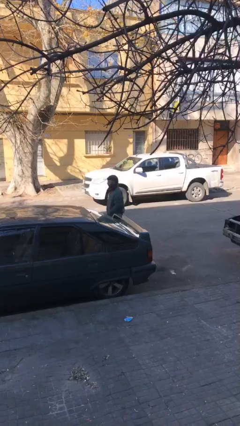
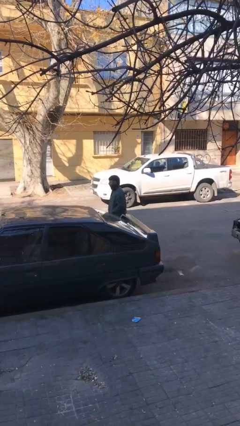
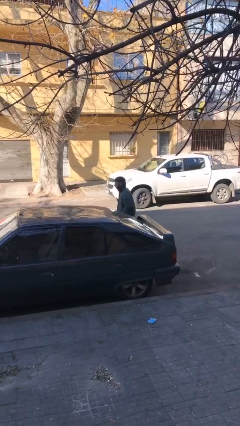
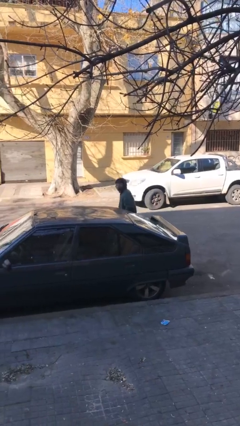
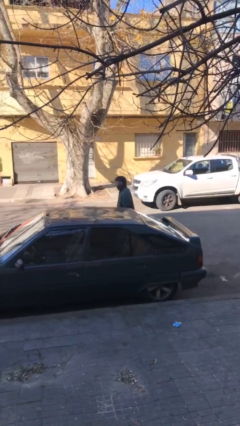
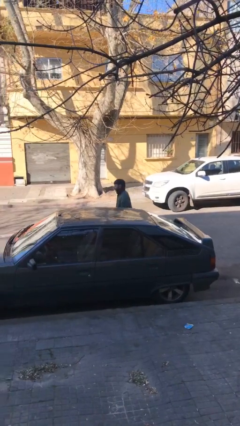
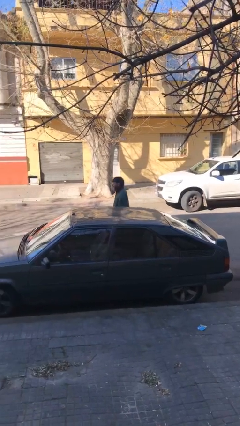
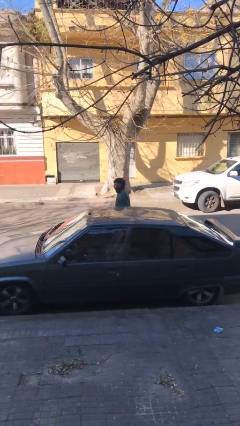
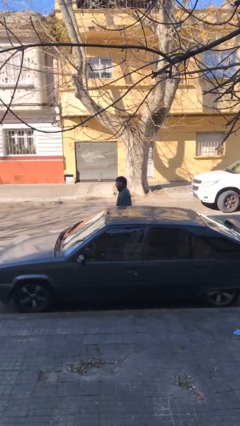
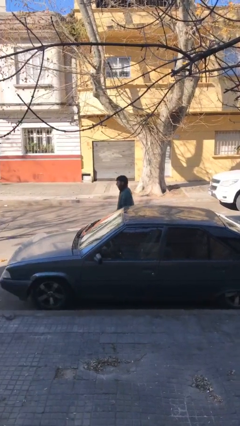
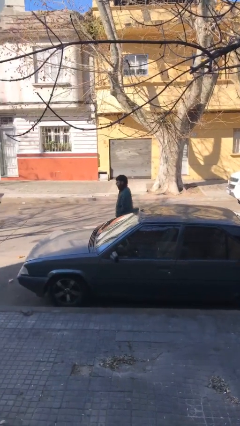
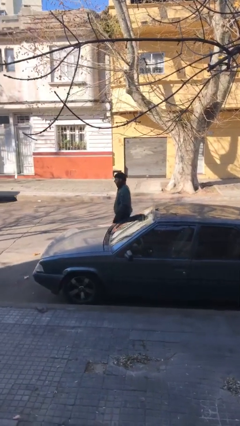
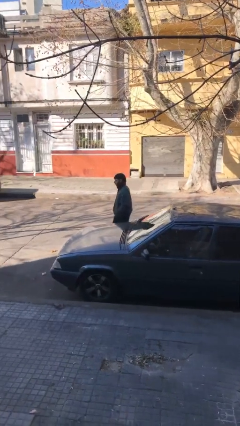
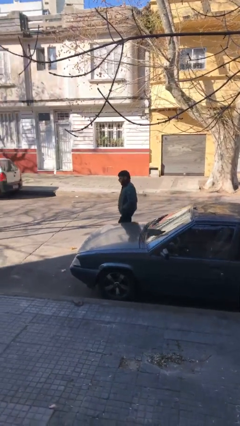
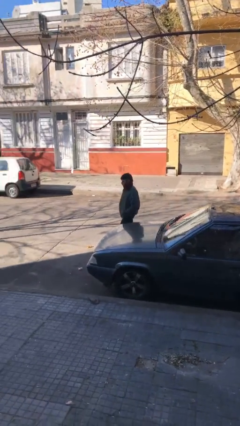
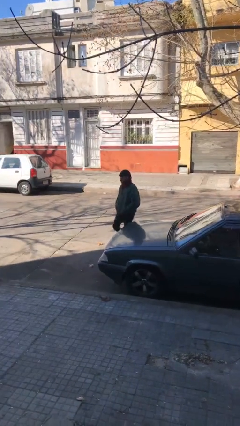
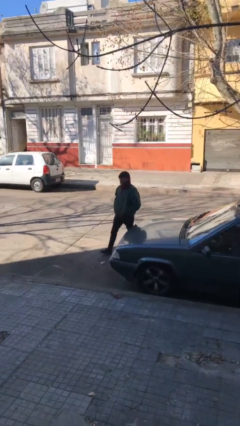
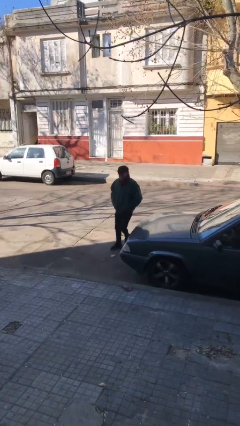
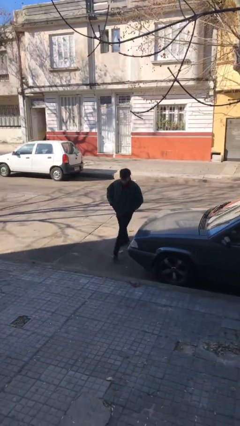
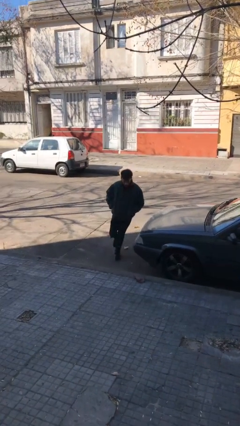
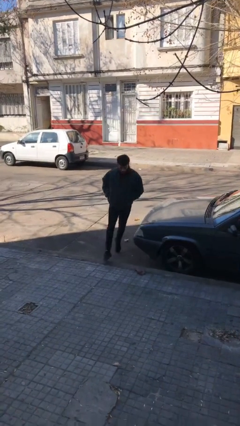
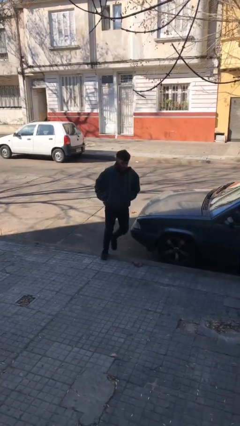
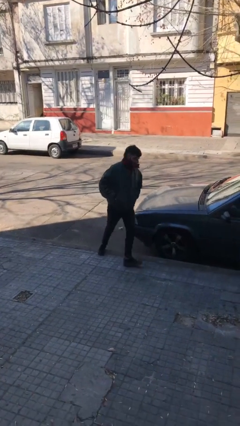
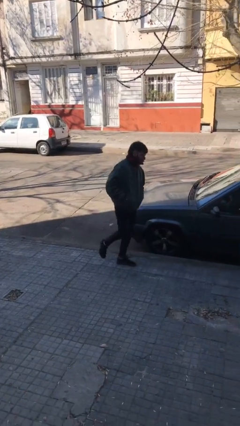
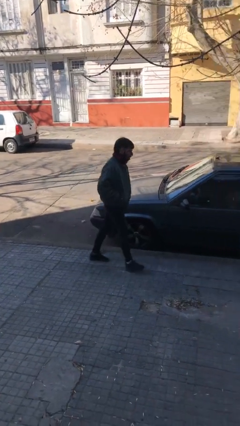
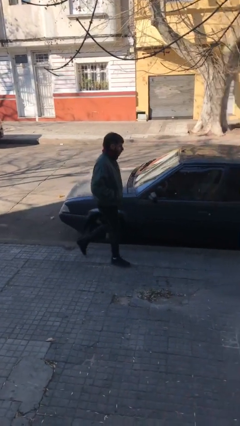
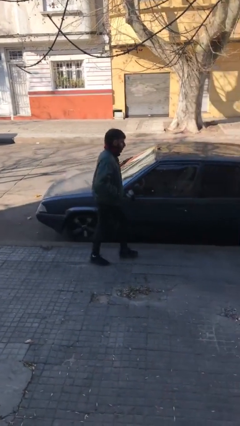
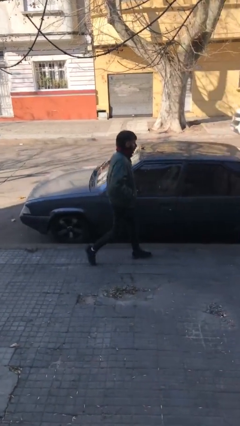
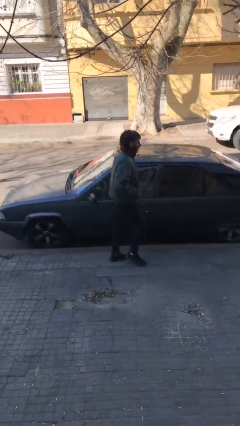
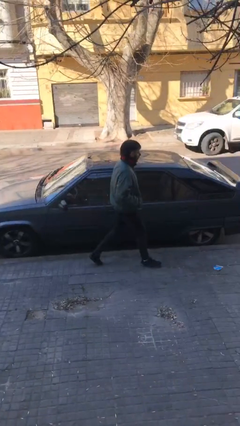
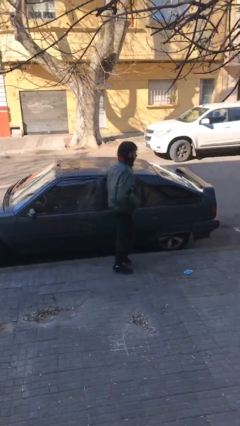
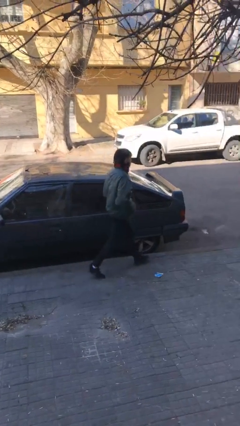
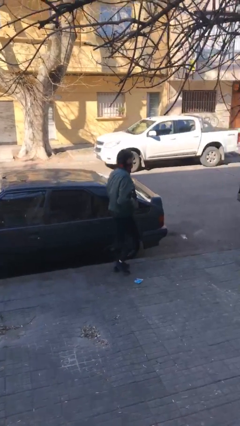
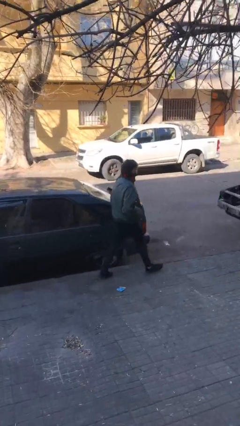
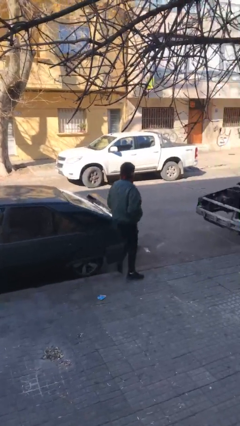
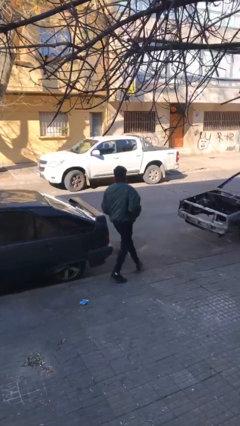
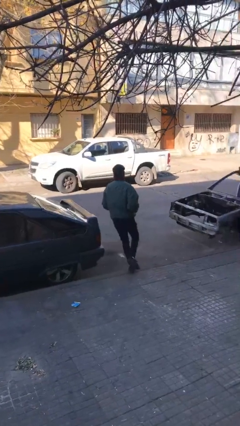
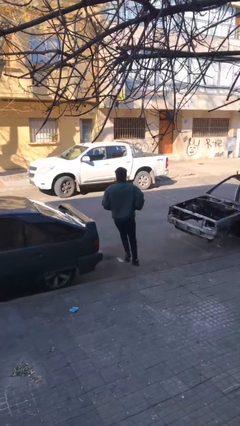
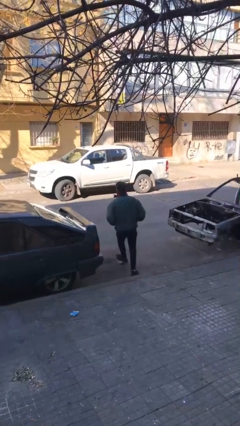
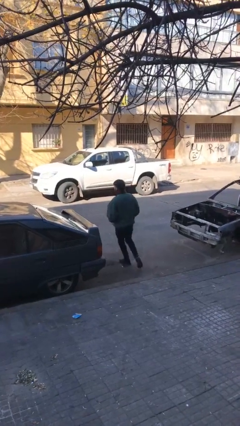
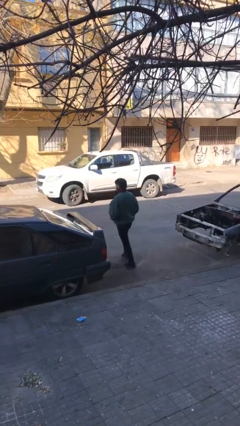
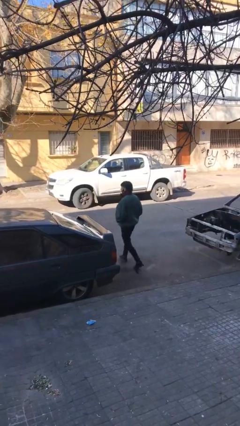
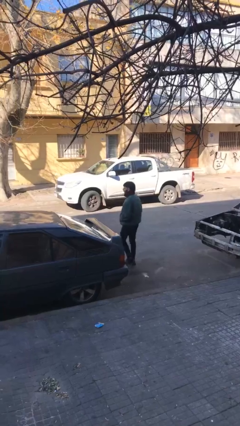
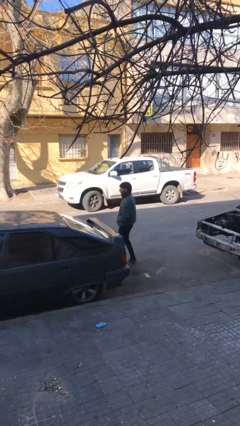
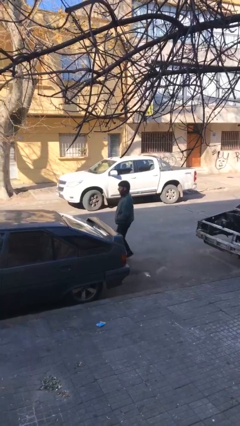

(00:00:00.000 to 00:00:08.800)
person walks around car

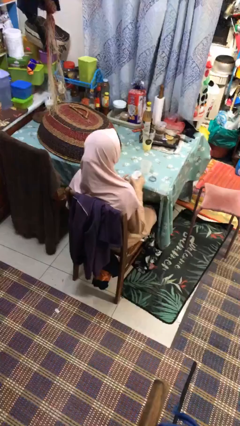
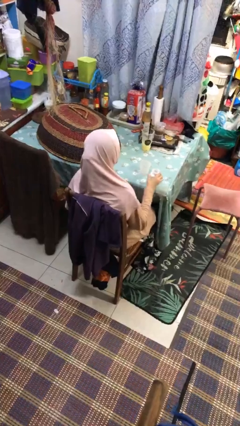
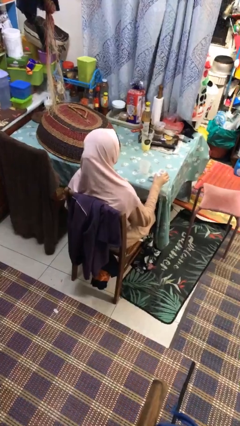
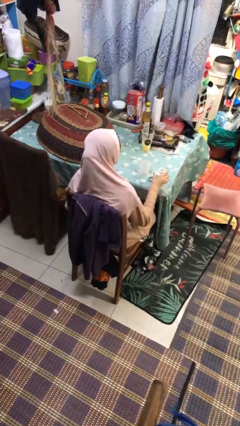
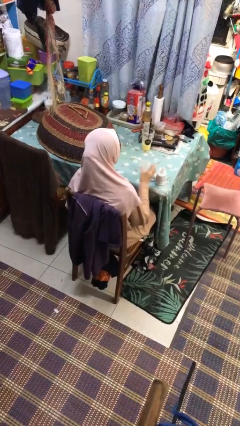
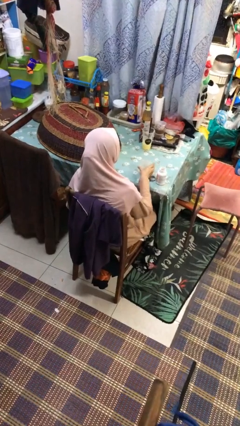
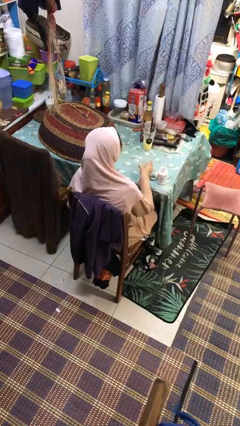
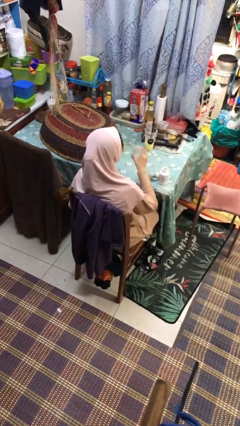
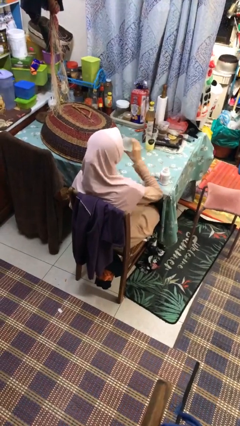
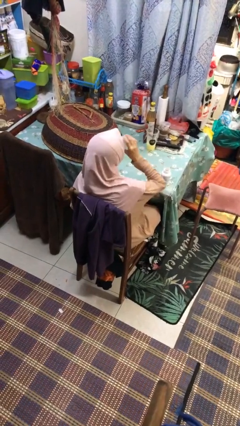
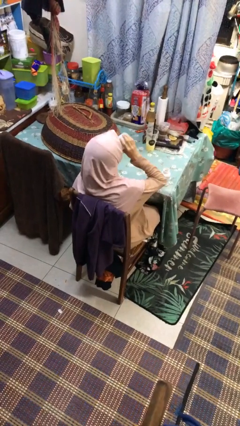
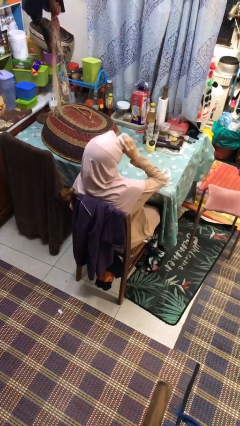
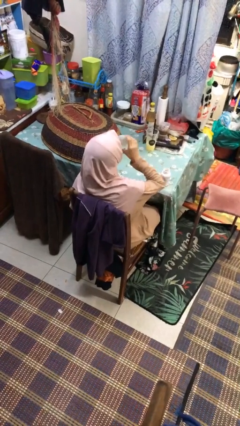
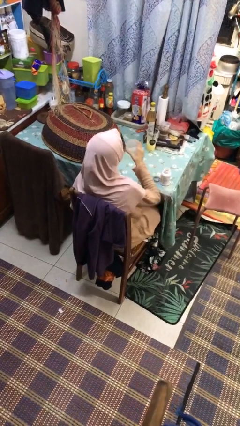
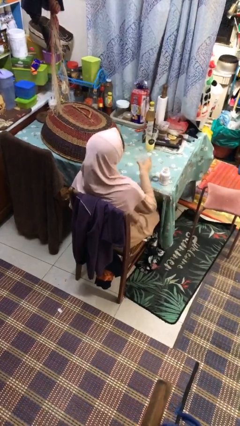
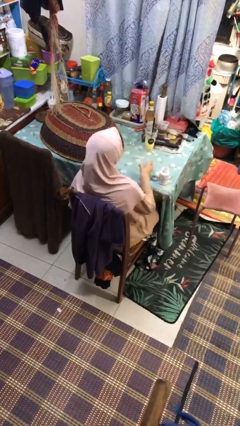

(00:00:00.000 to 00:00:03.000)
person drinks from cup

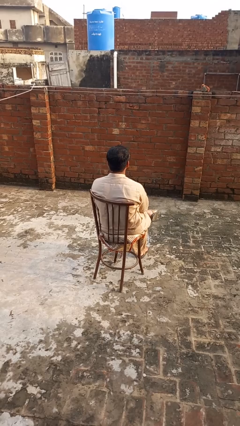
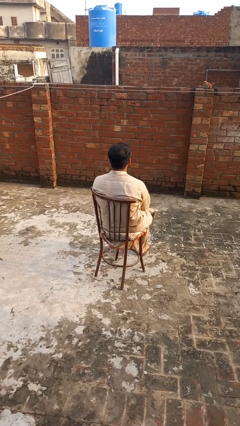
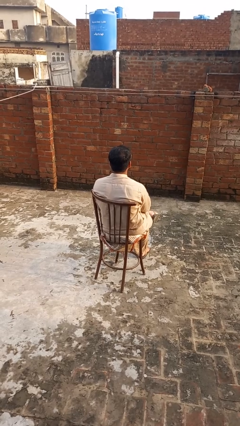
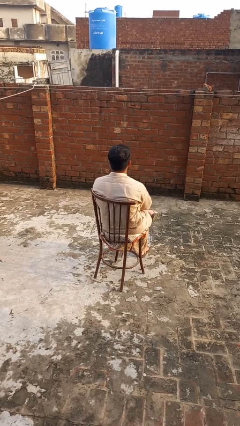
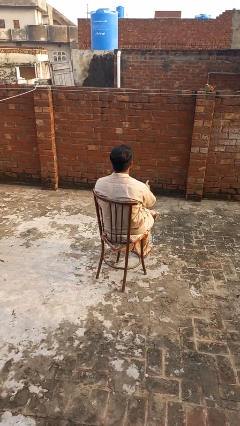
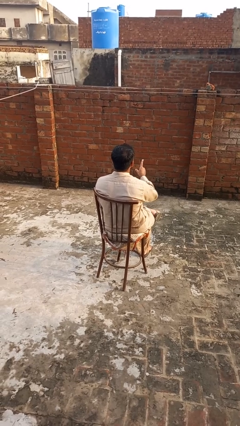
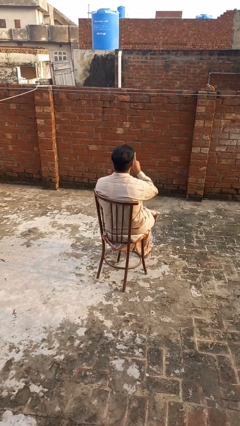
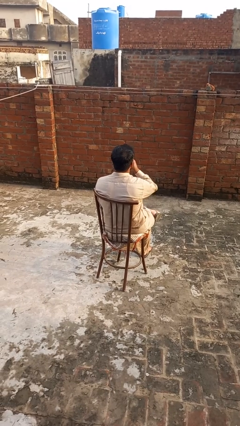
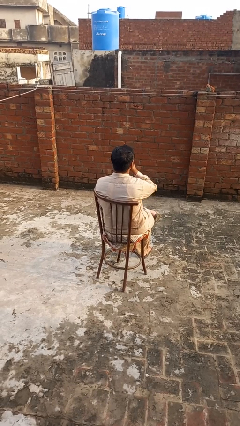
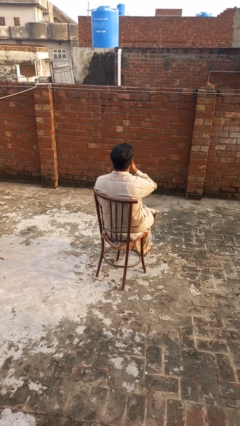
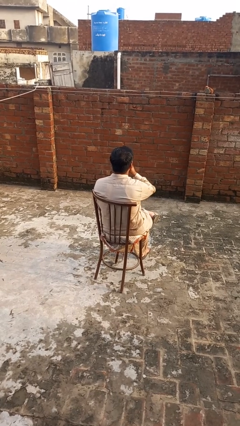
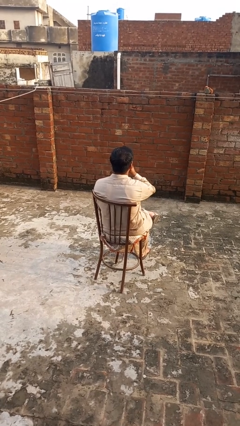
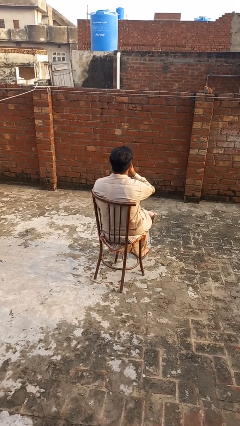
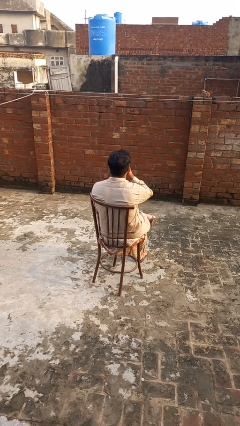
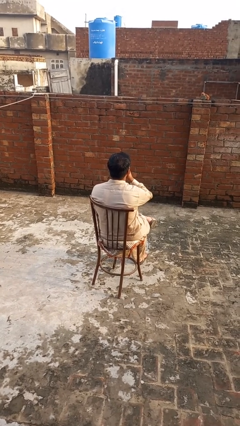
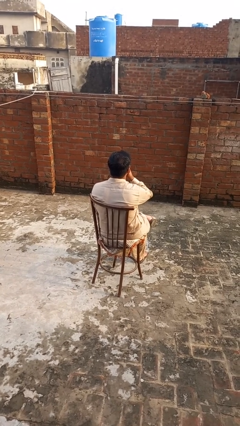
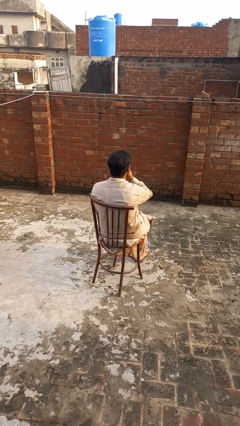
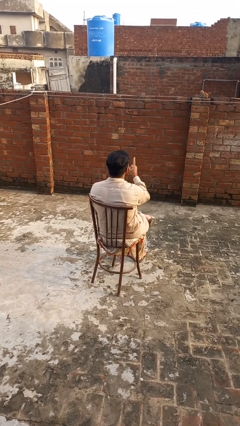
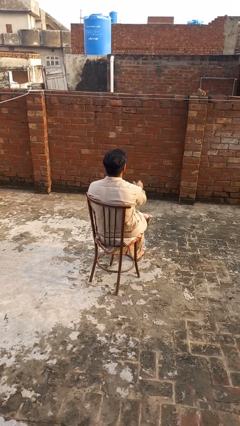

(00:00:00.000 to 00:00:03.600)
person gestures be quiet

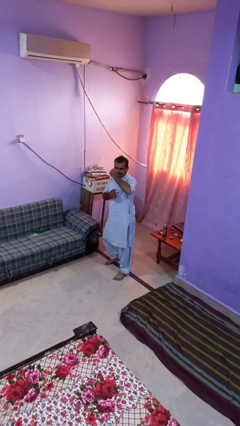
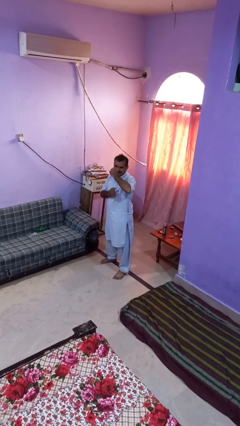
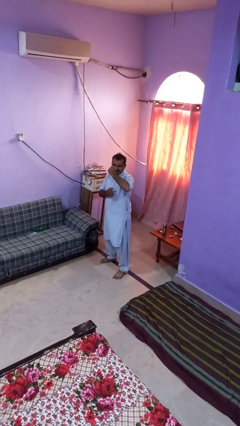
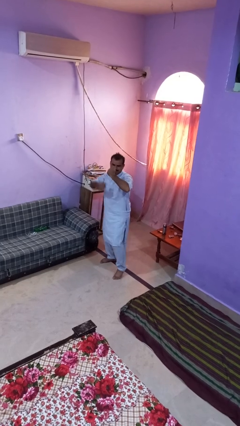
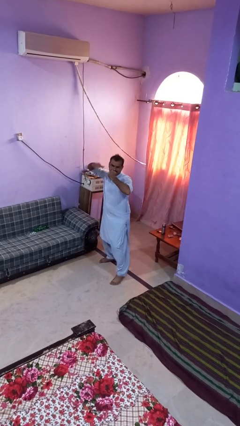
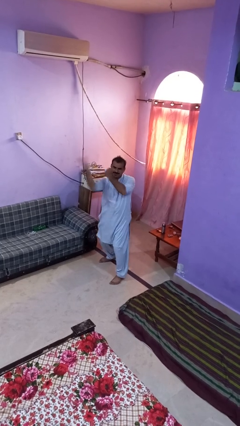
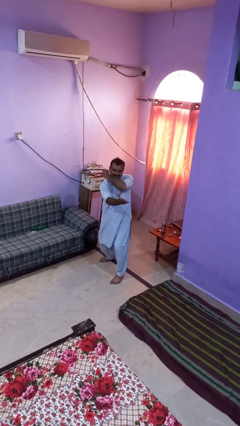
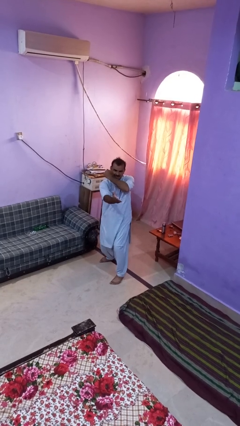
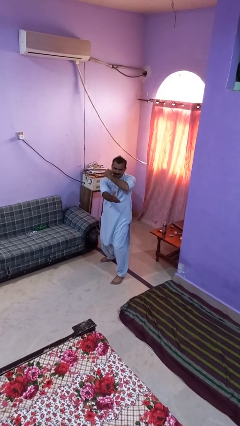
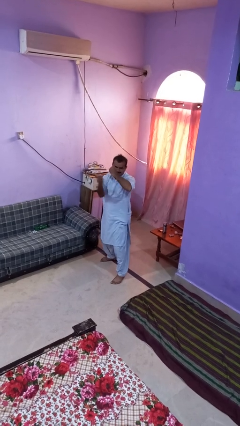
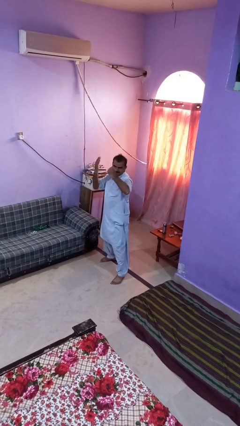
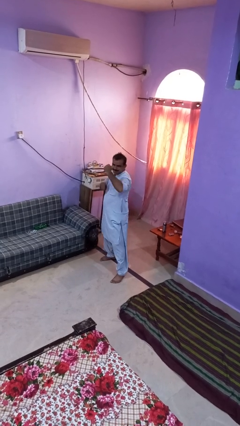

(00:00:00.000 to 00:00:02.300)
person karate chop

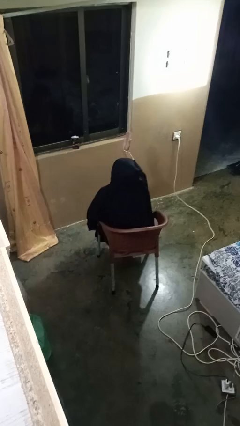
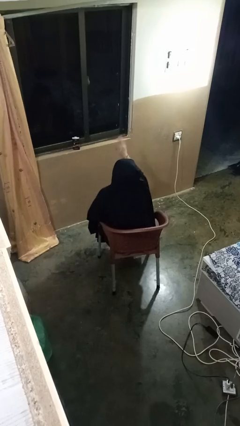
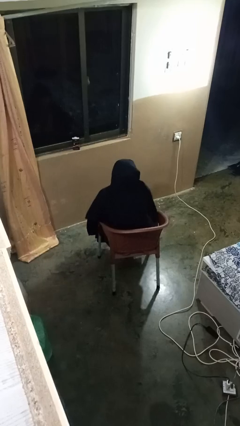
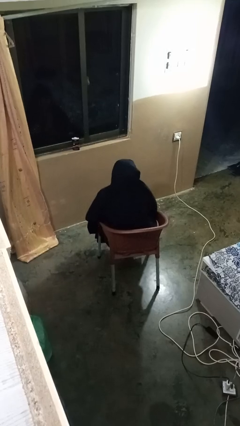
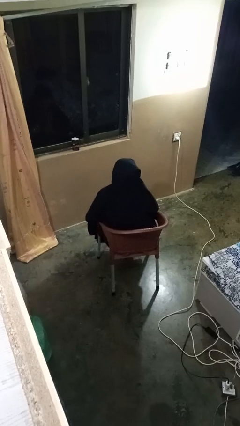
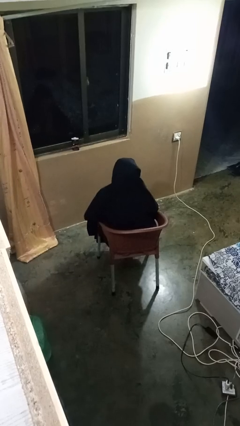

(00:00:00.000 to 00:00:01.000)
person gestures swipe down
